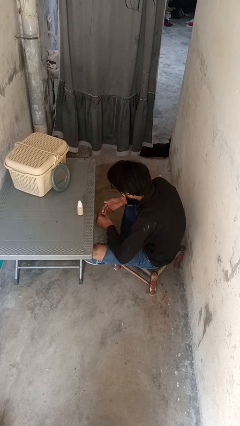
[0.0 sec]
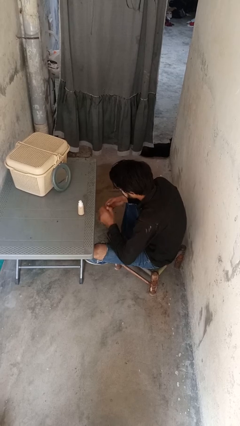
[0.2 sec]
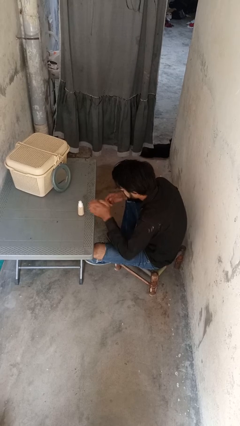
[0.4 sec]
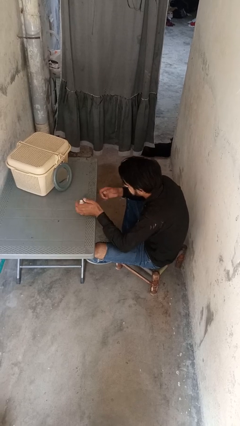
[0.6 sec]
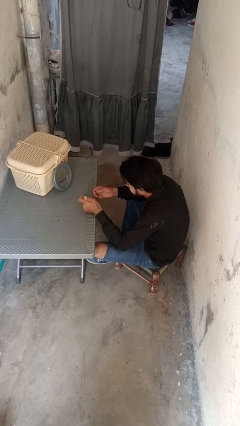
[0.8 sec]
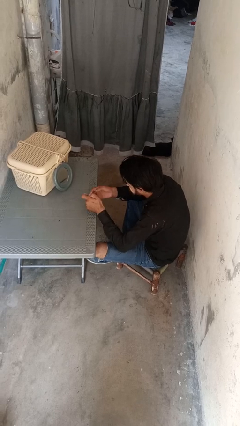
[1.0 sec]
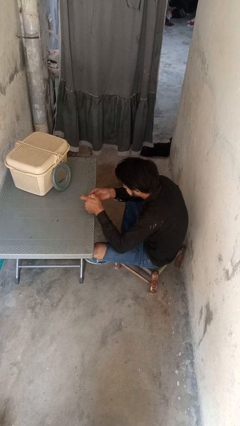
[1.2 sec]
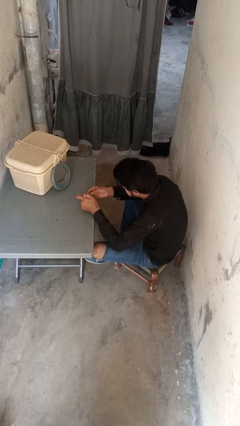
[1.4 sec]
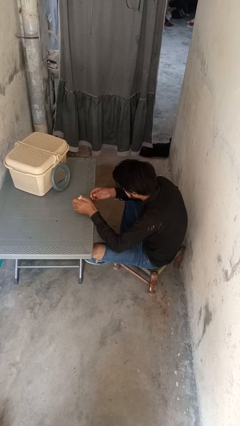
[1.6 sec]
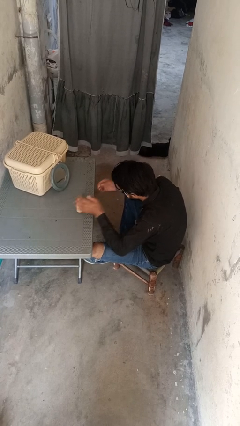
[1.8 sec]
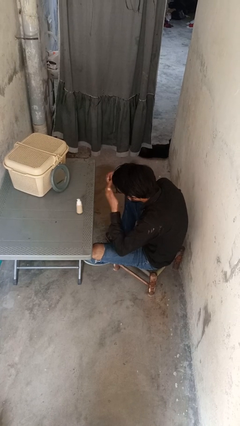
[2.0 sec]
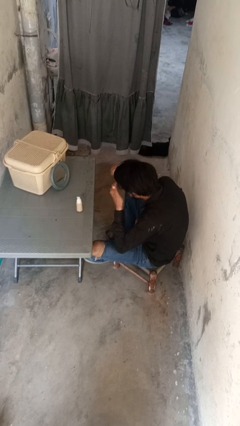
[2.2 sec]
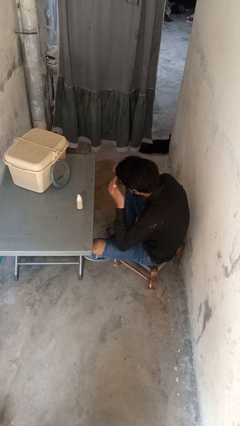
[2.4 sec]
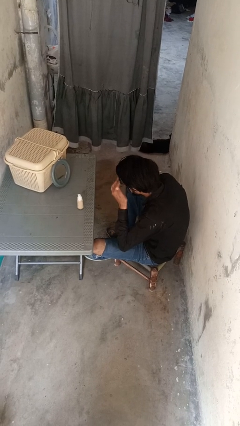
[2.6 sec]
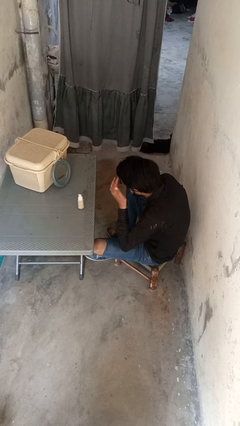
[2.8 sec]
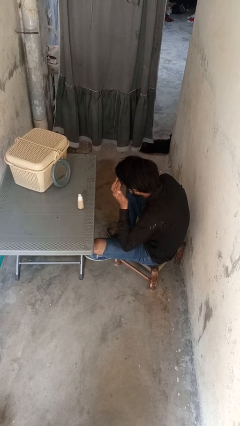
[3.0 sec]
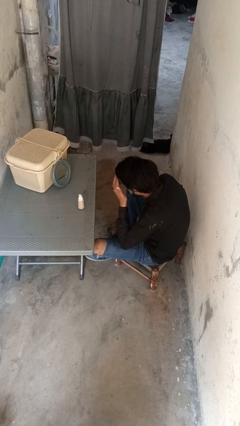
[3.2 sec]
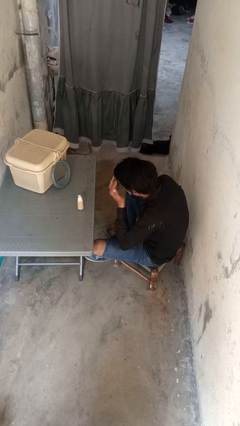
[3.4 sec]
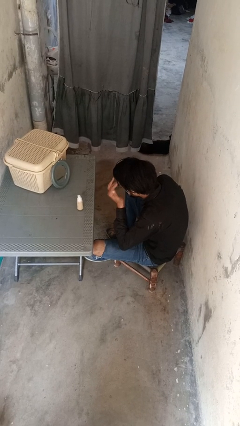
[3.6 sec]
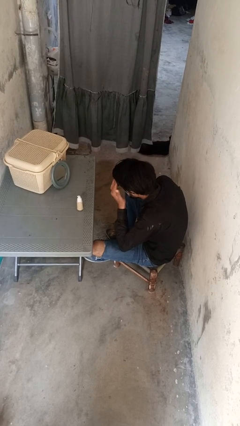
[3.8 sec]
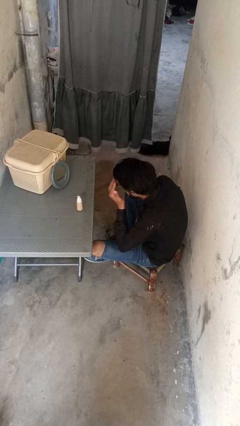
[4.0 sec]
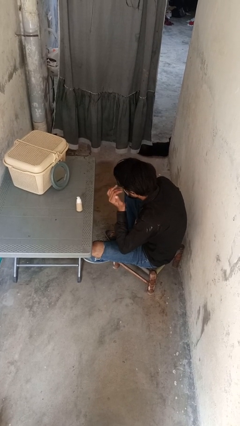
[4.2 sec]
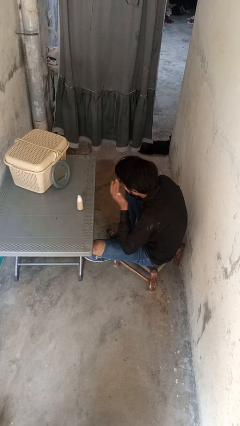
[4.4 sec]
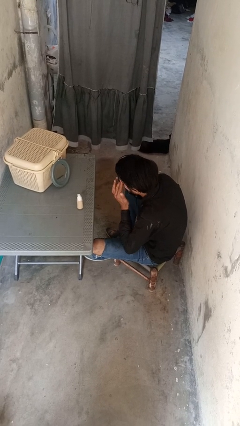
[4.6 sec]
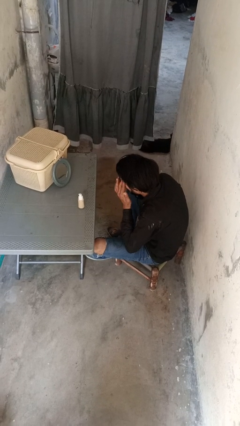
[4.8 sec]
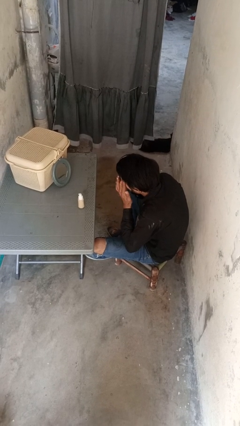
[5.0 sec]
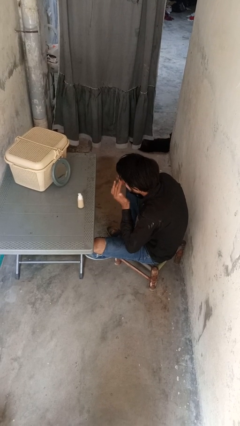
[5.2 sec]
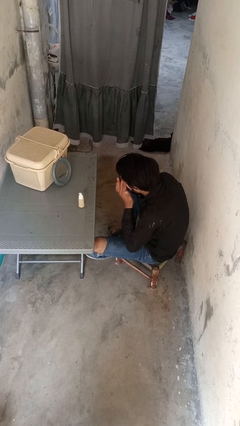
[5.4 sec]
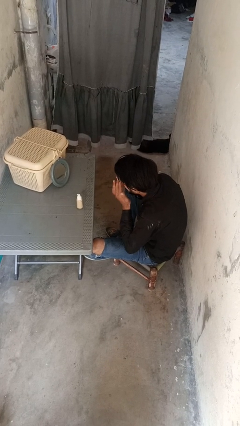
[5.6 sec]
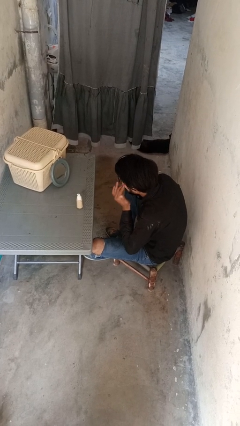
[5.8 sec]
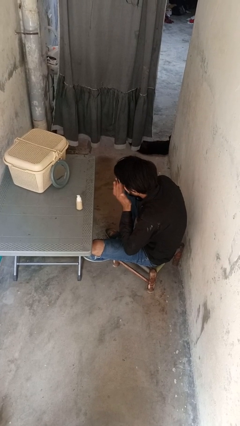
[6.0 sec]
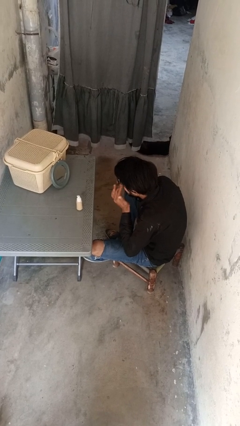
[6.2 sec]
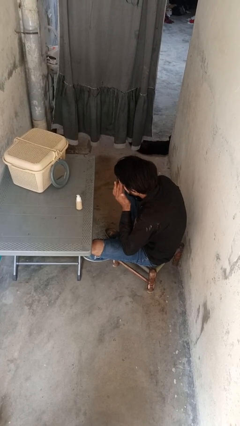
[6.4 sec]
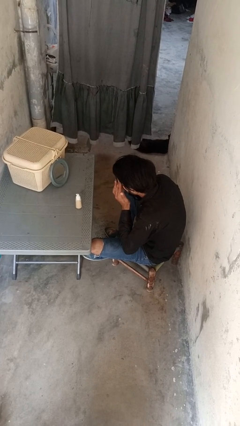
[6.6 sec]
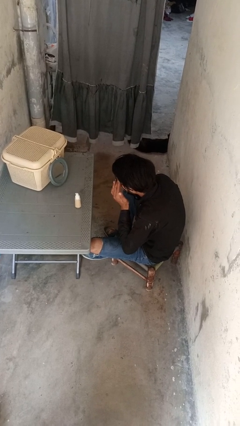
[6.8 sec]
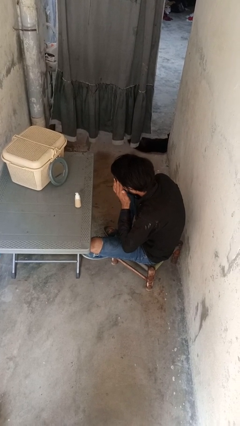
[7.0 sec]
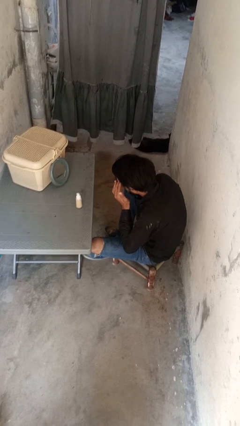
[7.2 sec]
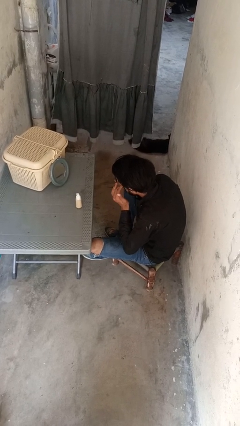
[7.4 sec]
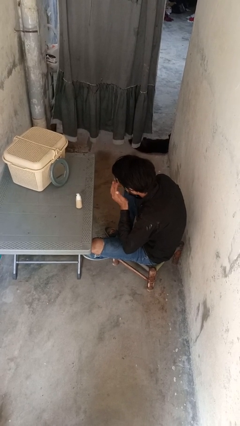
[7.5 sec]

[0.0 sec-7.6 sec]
person applies foundation makeup

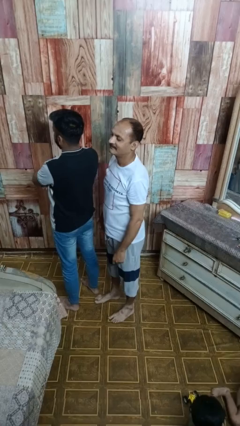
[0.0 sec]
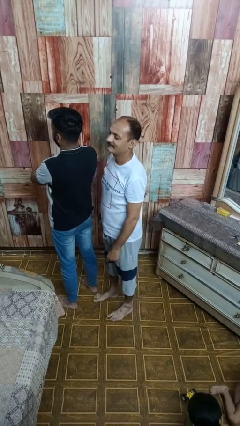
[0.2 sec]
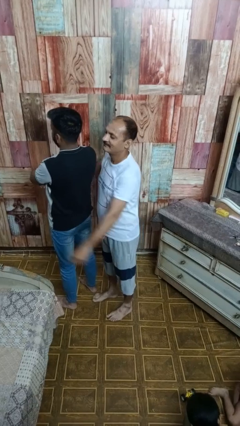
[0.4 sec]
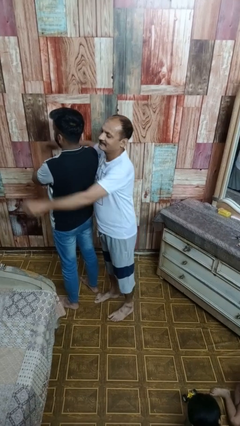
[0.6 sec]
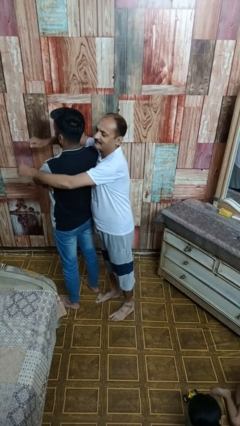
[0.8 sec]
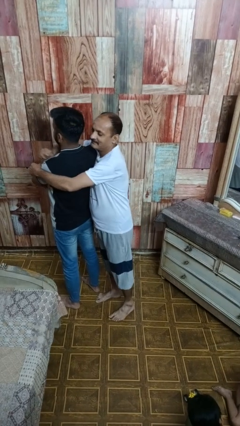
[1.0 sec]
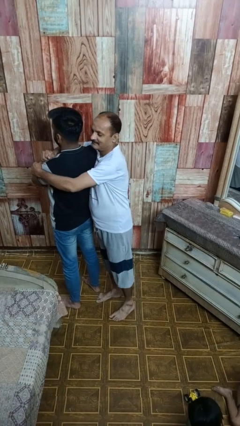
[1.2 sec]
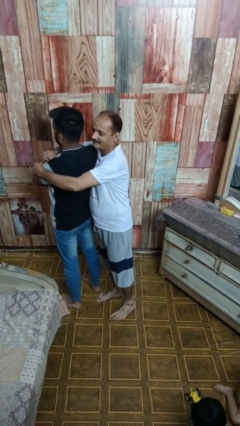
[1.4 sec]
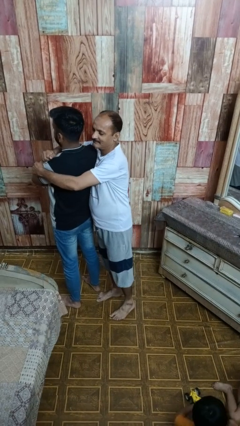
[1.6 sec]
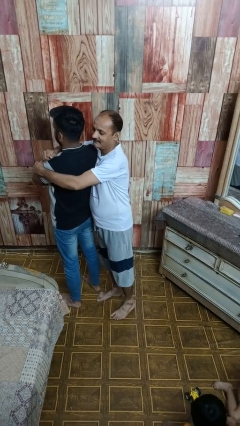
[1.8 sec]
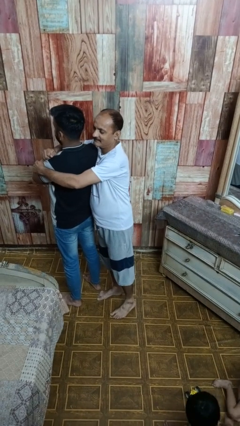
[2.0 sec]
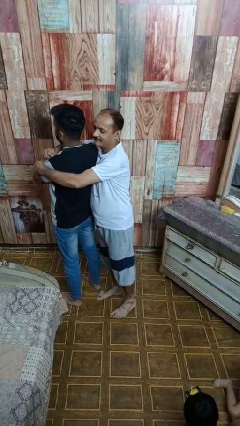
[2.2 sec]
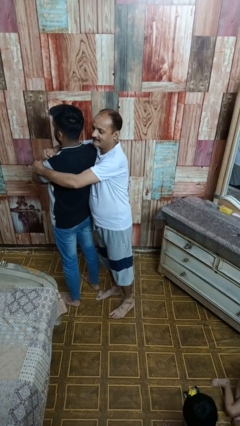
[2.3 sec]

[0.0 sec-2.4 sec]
person hugs person from behind

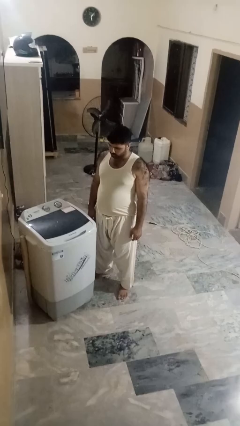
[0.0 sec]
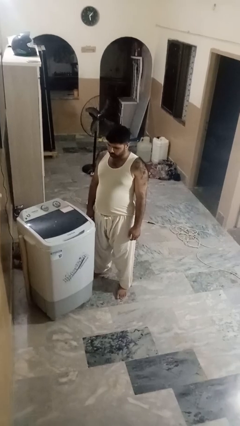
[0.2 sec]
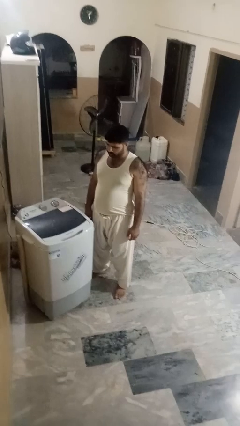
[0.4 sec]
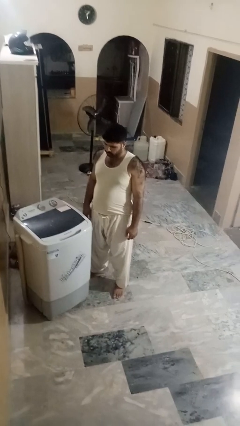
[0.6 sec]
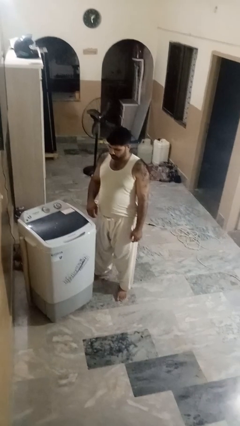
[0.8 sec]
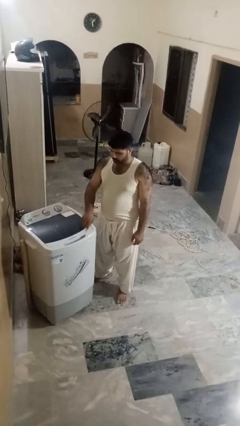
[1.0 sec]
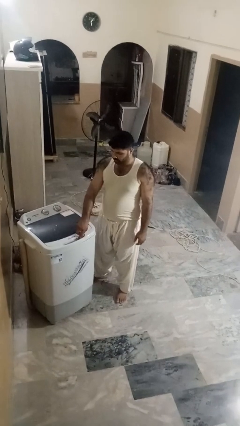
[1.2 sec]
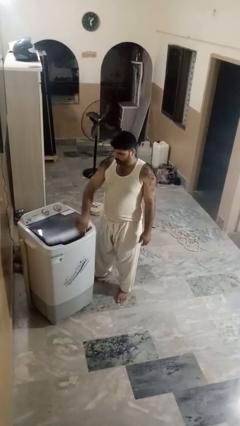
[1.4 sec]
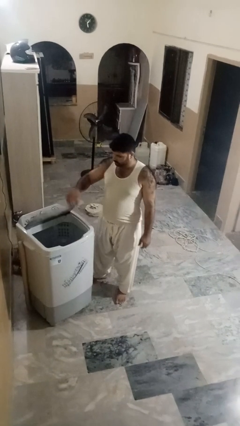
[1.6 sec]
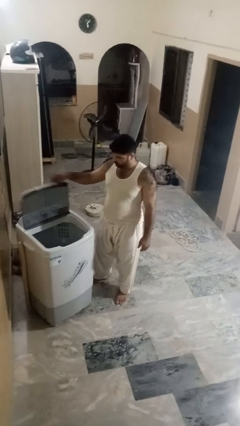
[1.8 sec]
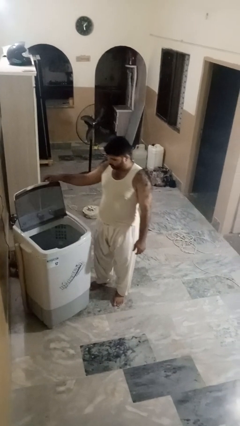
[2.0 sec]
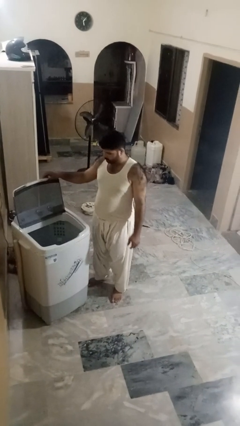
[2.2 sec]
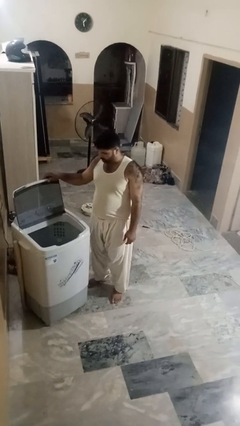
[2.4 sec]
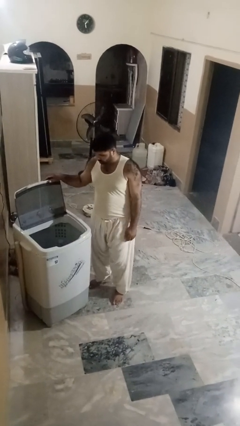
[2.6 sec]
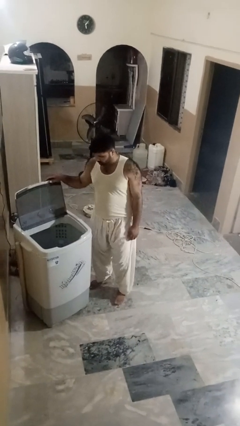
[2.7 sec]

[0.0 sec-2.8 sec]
person opens clothes washer

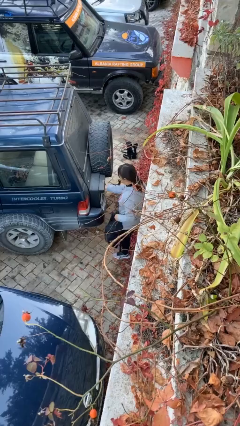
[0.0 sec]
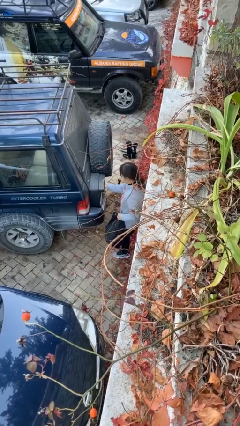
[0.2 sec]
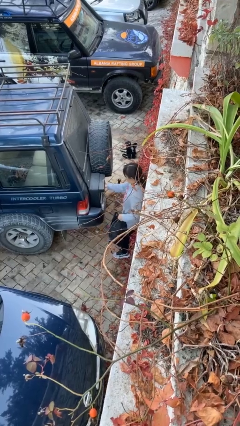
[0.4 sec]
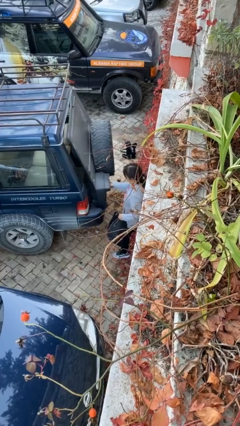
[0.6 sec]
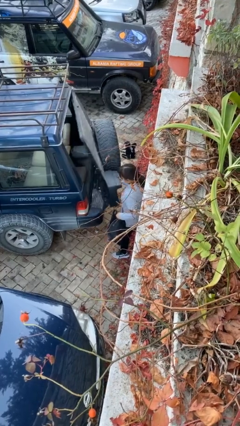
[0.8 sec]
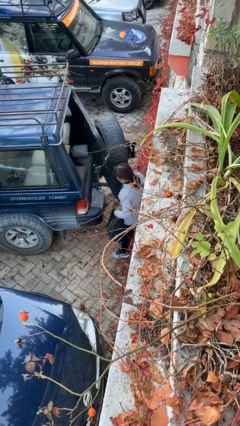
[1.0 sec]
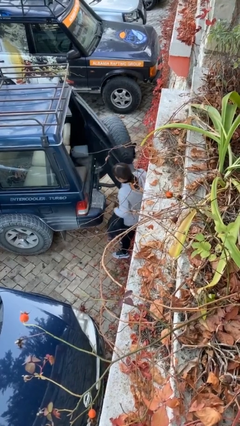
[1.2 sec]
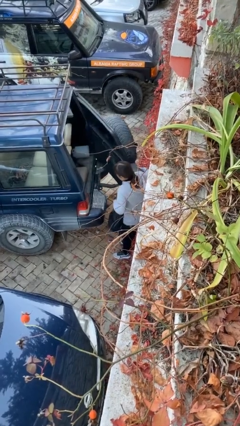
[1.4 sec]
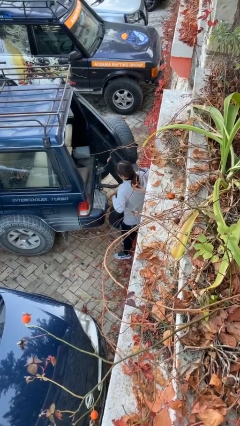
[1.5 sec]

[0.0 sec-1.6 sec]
person opens car trunk

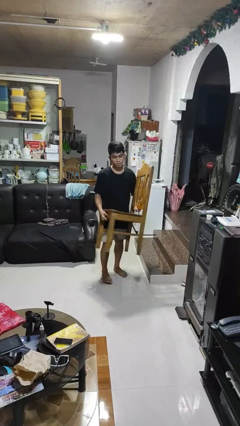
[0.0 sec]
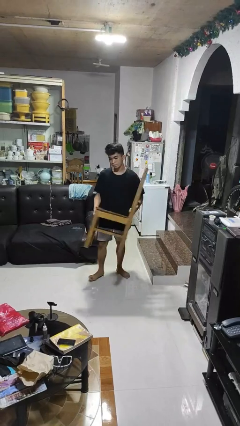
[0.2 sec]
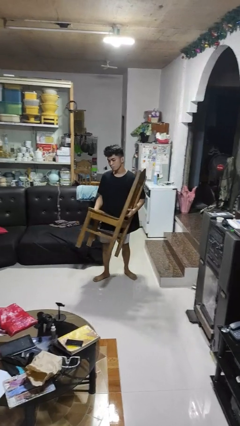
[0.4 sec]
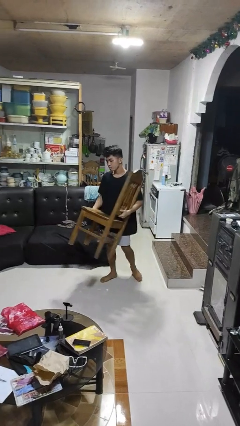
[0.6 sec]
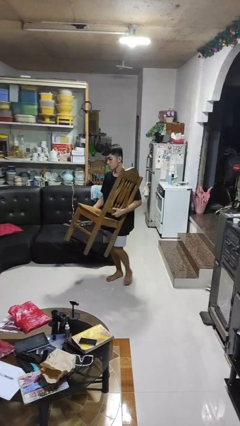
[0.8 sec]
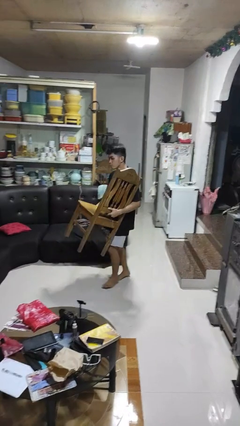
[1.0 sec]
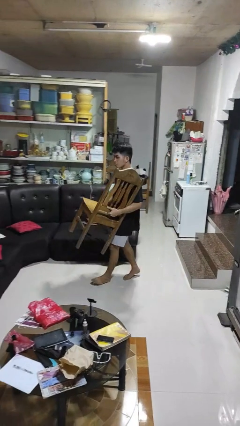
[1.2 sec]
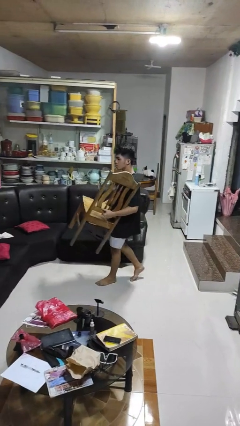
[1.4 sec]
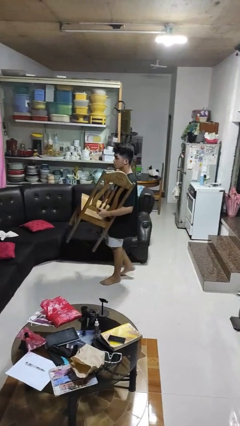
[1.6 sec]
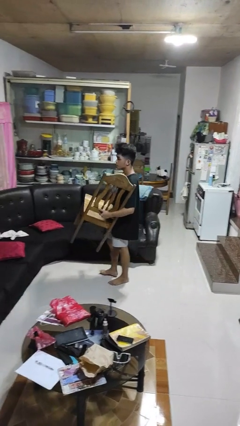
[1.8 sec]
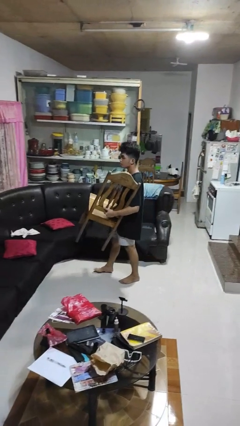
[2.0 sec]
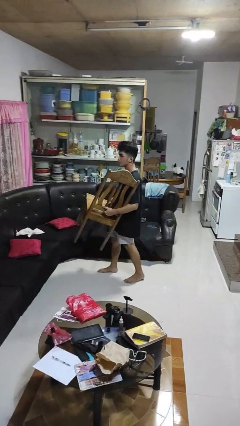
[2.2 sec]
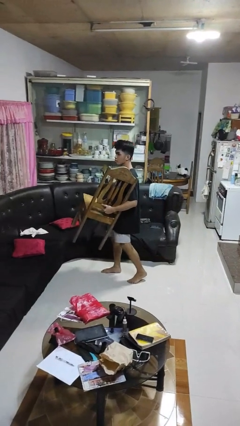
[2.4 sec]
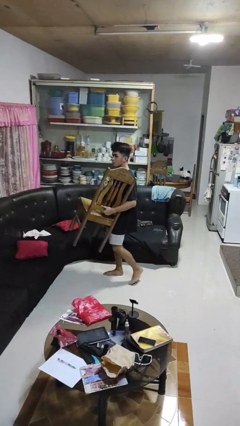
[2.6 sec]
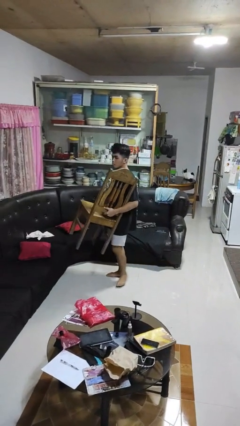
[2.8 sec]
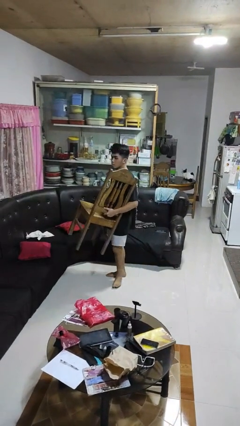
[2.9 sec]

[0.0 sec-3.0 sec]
person carries furniture
